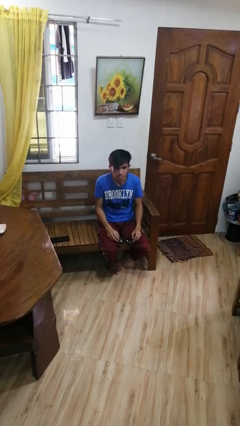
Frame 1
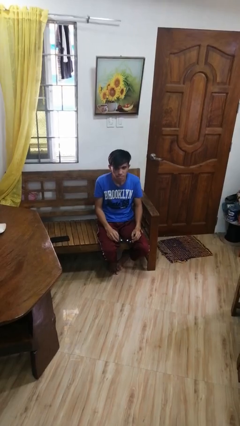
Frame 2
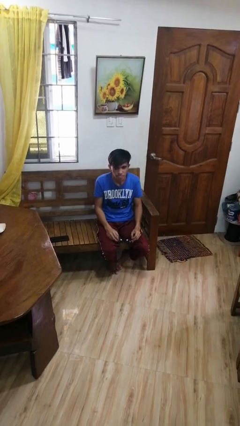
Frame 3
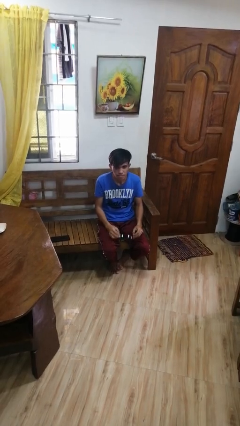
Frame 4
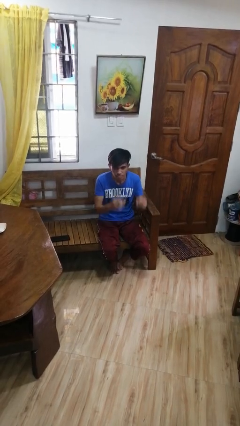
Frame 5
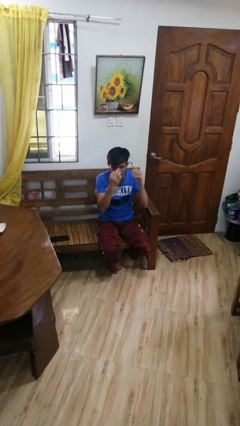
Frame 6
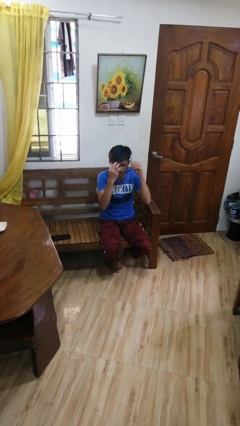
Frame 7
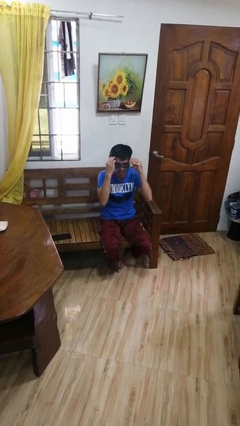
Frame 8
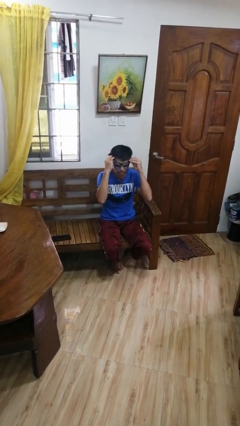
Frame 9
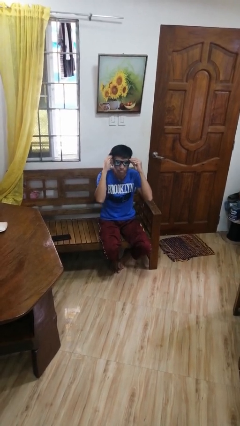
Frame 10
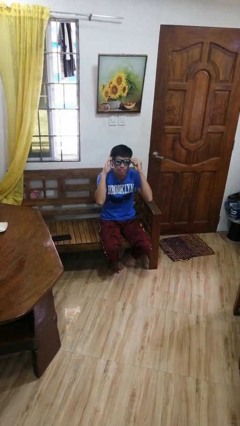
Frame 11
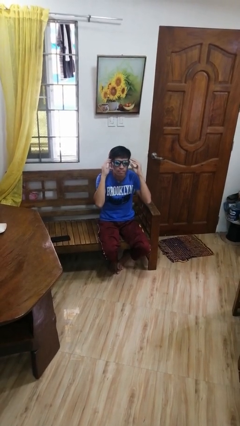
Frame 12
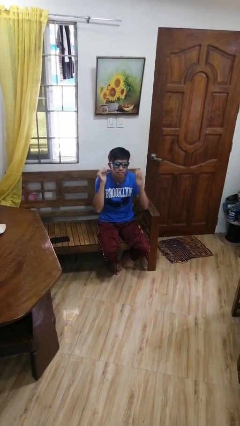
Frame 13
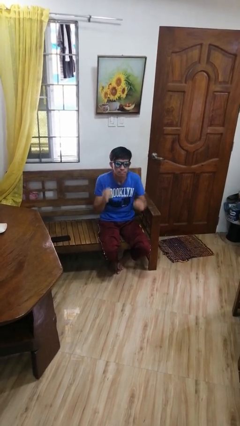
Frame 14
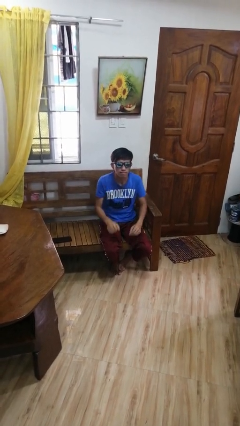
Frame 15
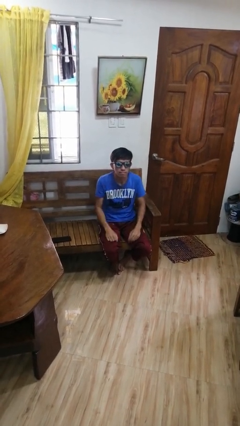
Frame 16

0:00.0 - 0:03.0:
person puts on sunglasses

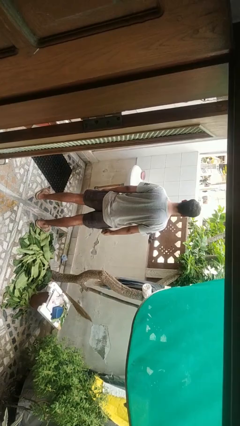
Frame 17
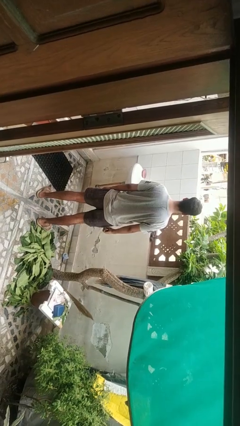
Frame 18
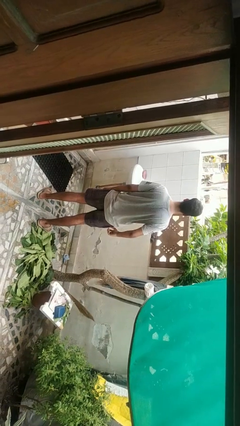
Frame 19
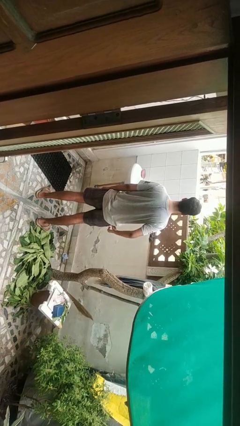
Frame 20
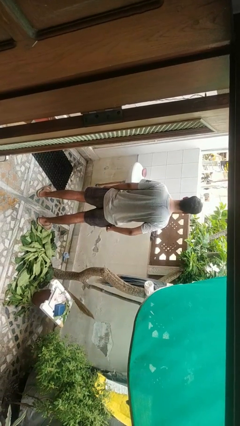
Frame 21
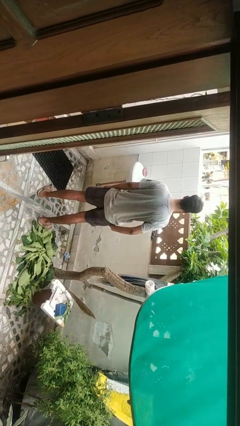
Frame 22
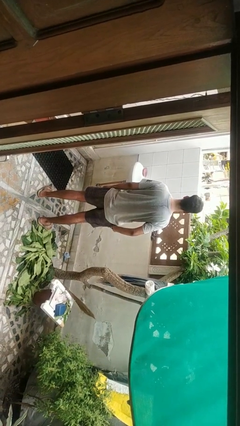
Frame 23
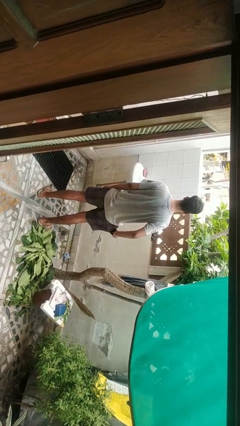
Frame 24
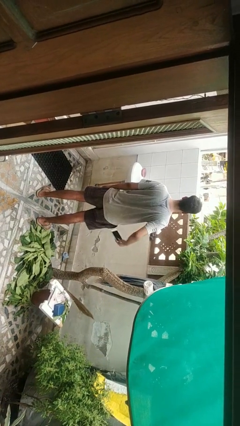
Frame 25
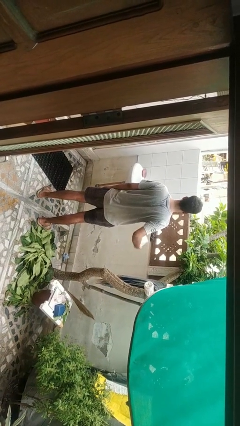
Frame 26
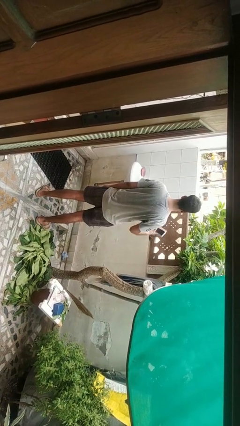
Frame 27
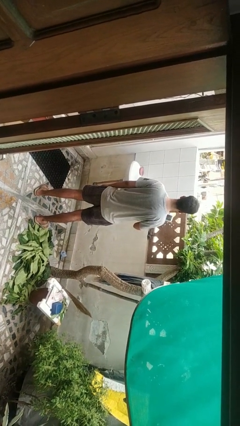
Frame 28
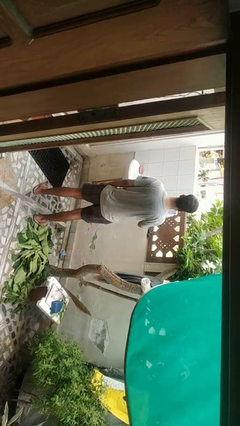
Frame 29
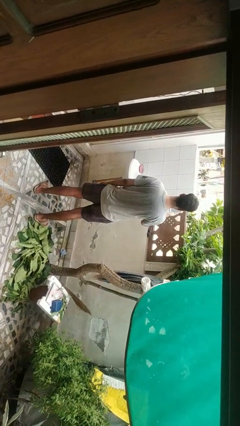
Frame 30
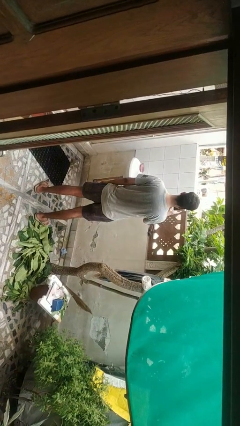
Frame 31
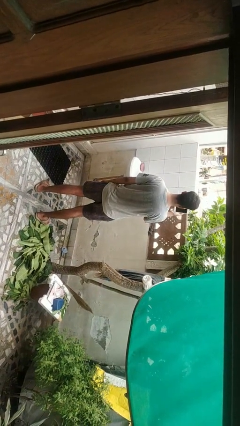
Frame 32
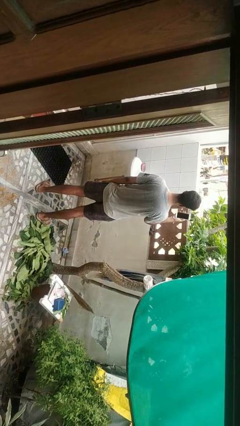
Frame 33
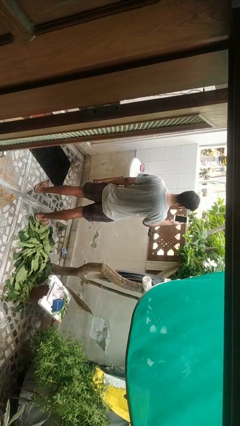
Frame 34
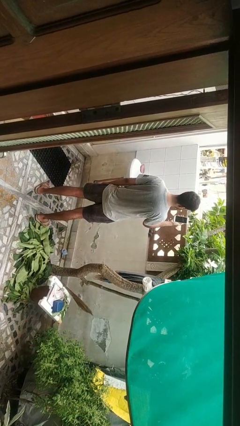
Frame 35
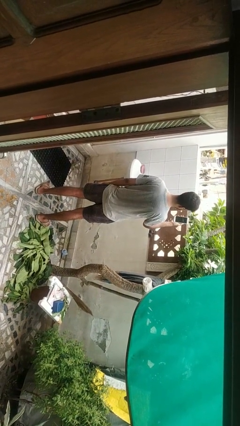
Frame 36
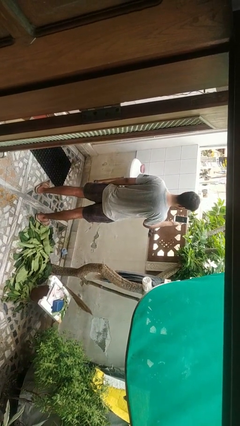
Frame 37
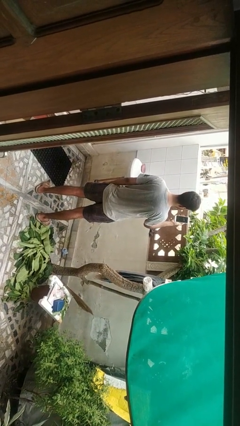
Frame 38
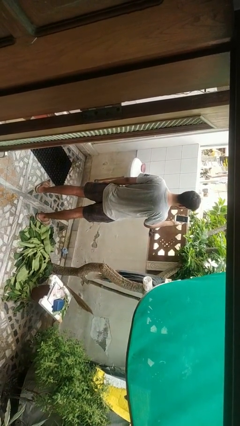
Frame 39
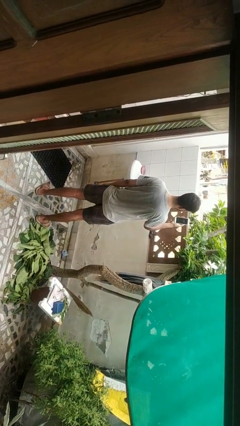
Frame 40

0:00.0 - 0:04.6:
person takes phone from pocket

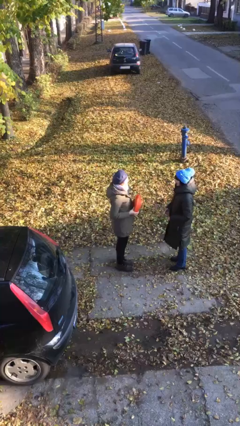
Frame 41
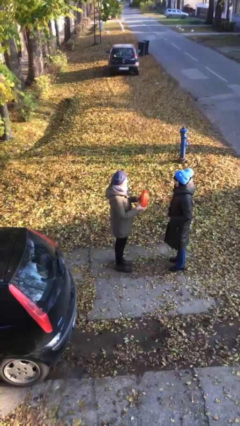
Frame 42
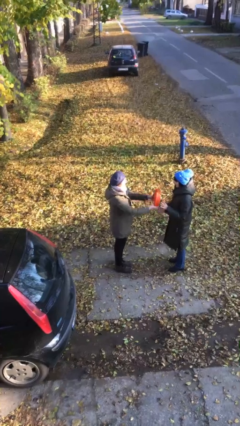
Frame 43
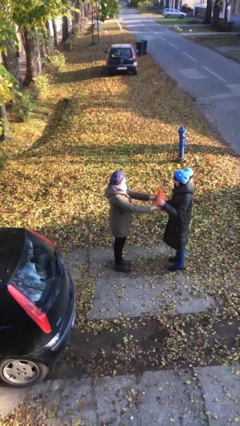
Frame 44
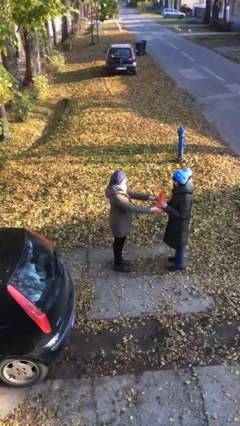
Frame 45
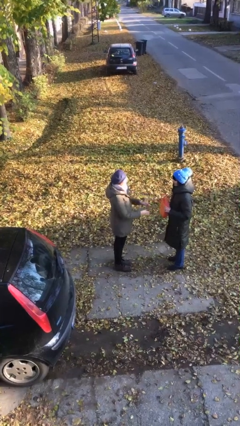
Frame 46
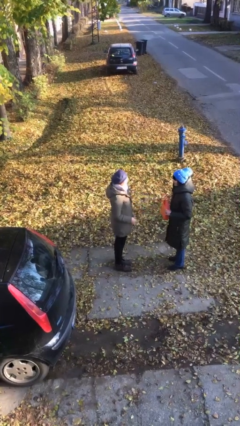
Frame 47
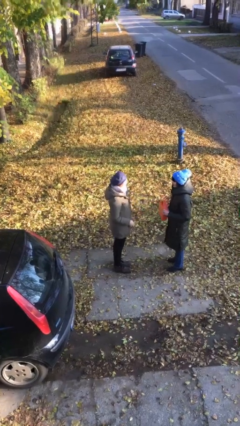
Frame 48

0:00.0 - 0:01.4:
person transfers object to person

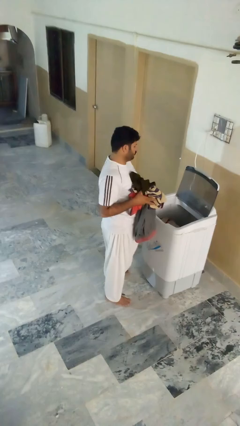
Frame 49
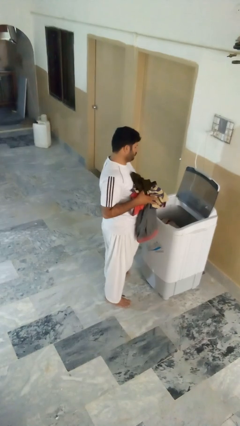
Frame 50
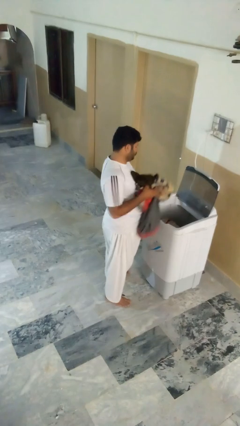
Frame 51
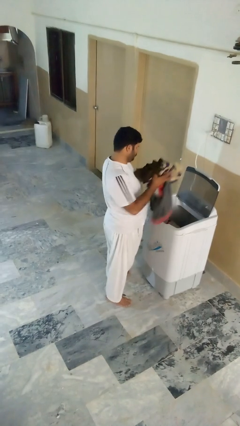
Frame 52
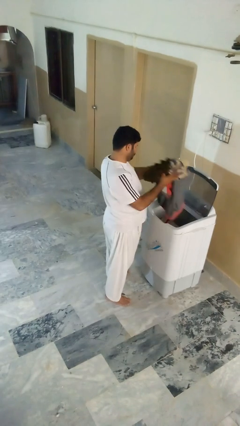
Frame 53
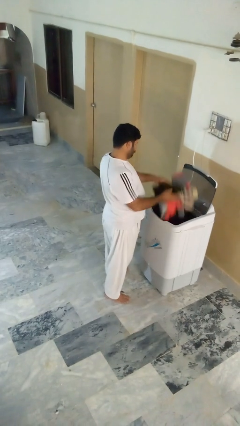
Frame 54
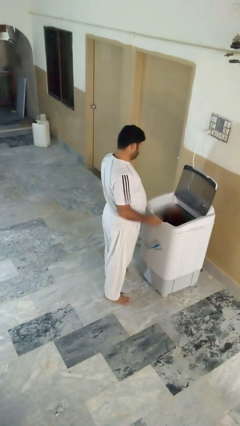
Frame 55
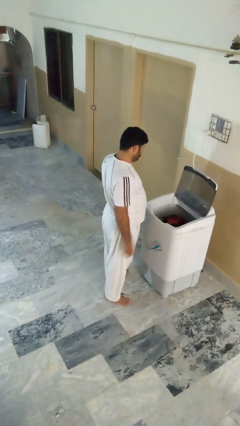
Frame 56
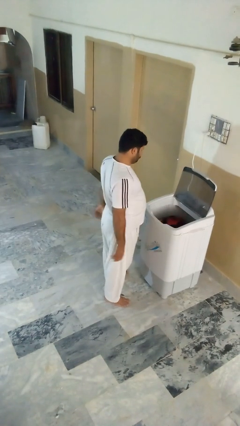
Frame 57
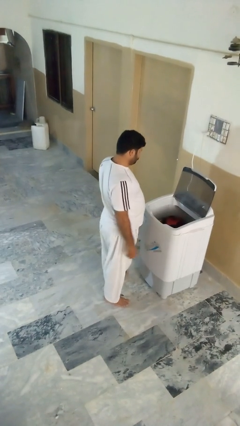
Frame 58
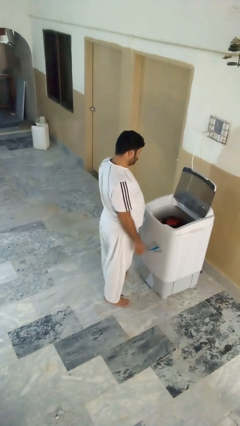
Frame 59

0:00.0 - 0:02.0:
person loads clotheswasher

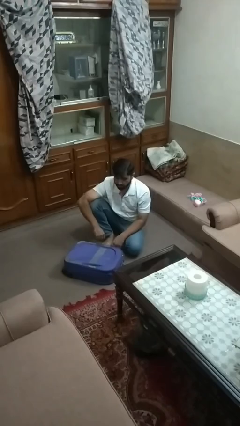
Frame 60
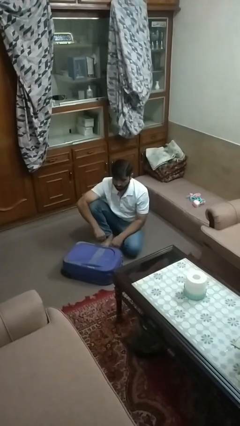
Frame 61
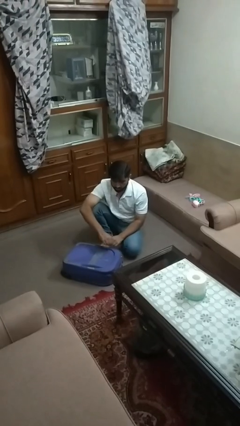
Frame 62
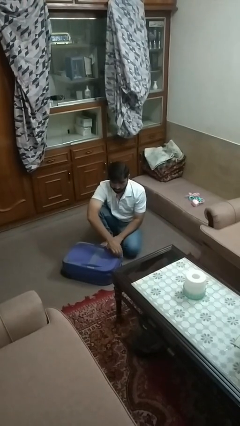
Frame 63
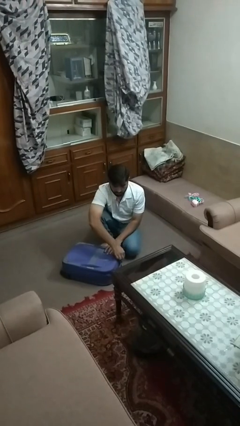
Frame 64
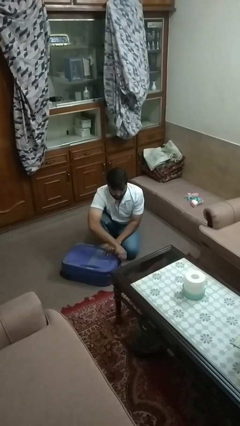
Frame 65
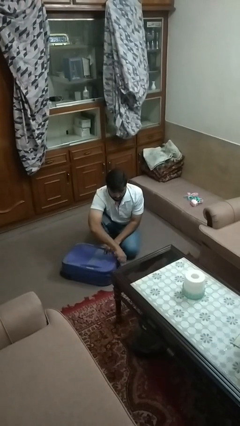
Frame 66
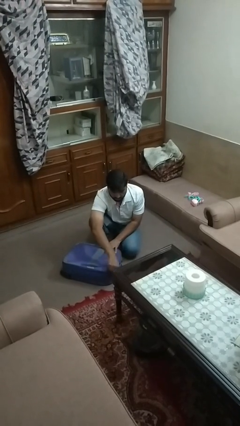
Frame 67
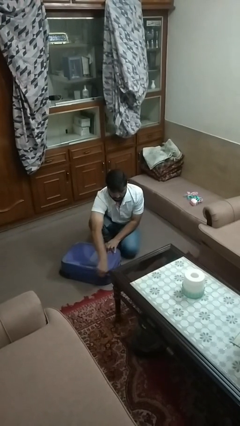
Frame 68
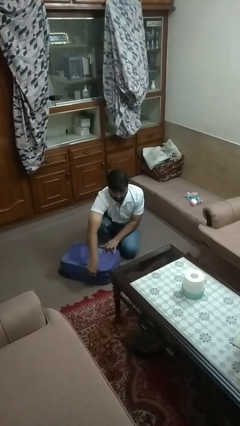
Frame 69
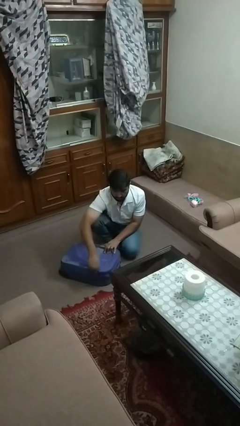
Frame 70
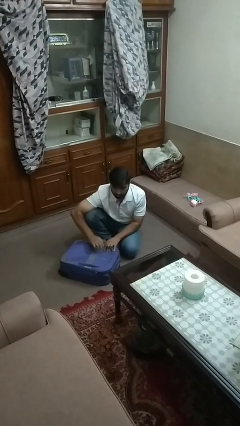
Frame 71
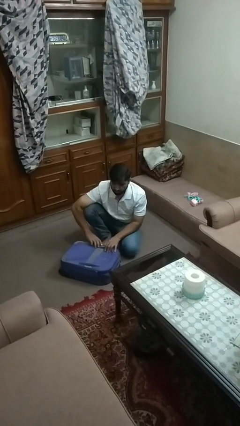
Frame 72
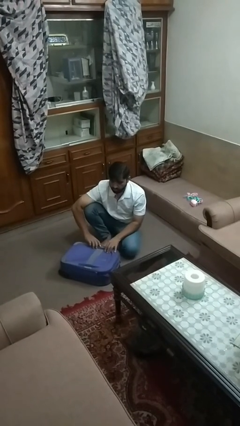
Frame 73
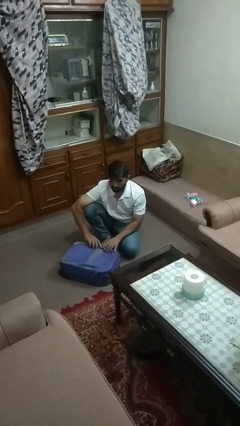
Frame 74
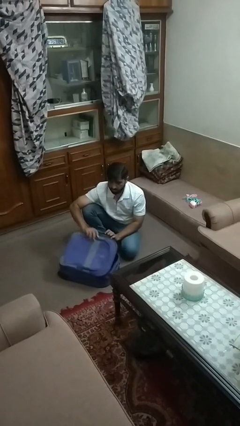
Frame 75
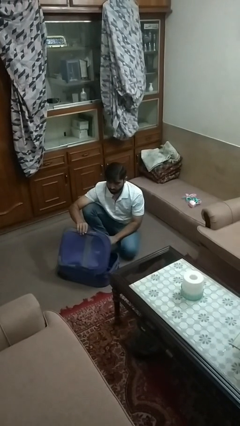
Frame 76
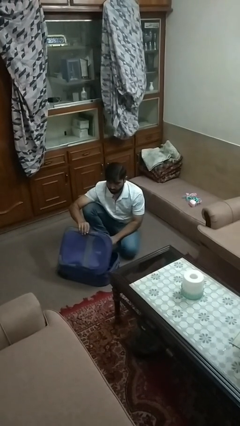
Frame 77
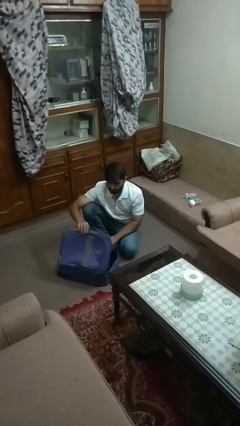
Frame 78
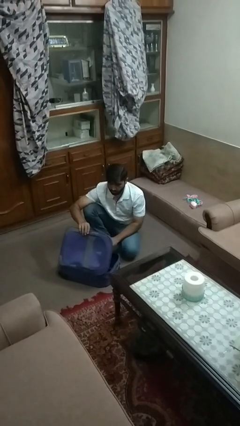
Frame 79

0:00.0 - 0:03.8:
person opens suitcase

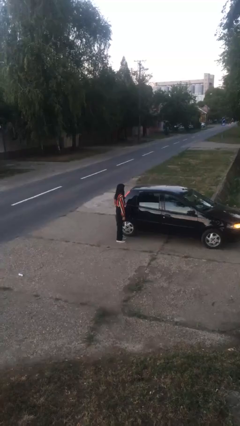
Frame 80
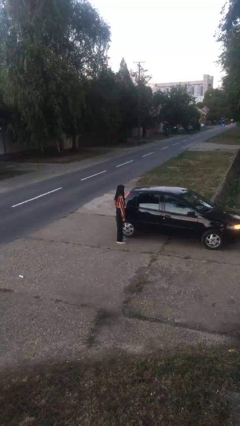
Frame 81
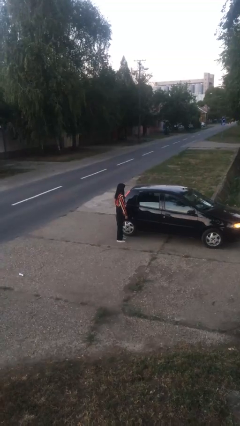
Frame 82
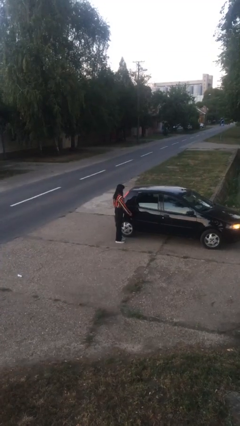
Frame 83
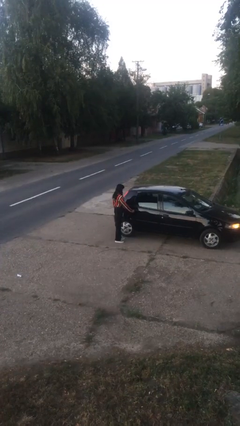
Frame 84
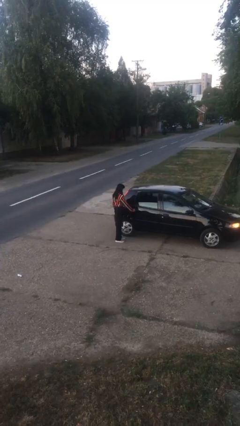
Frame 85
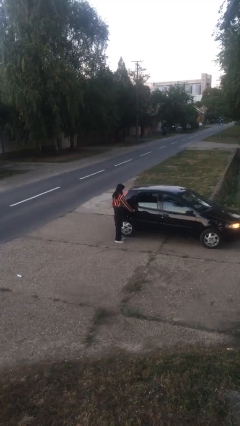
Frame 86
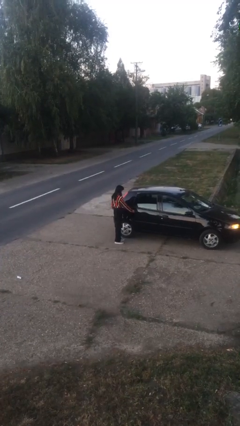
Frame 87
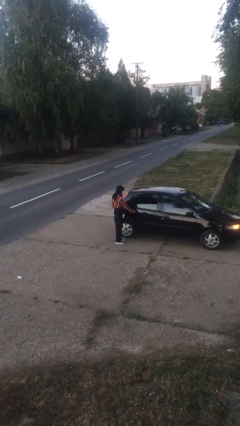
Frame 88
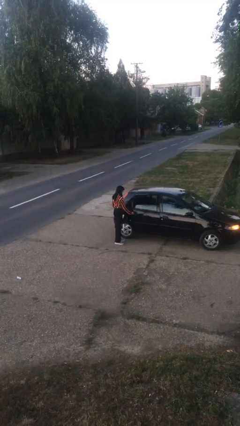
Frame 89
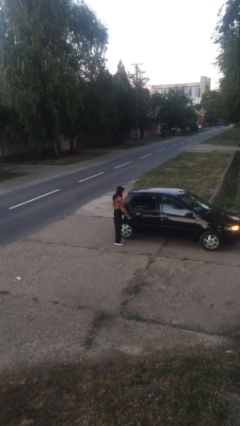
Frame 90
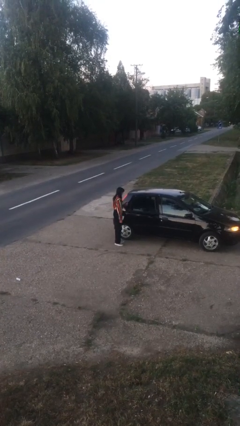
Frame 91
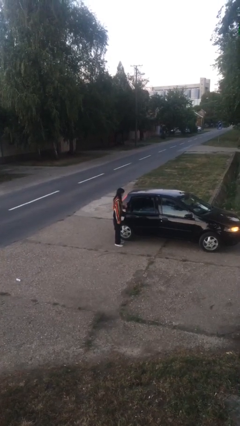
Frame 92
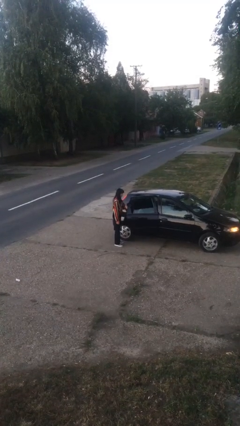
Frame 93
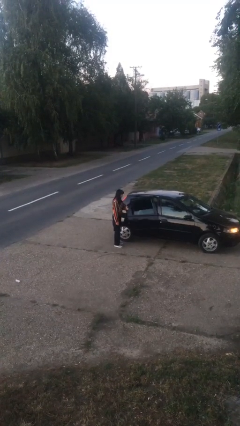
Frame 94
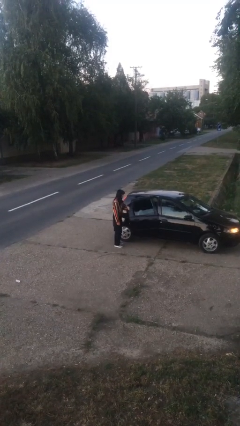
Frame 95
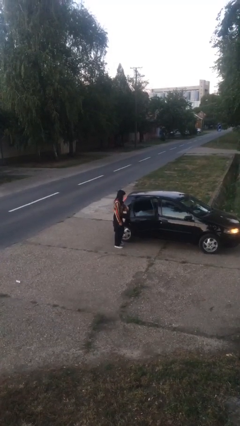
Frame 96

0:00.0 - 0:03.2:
person opens car door
